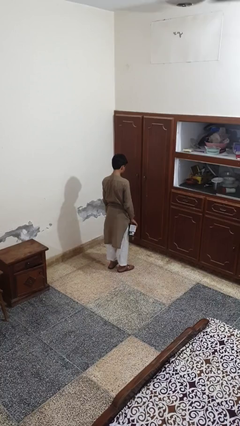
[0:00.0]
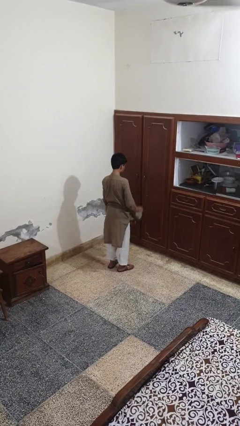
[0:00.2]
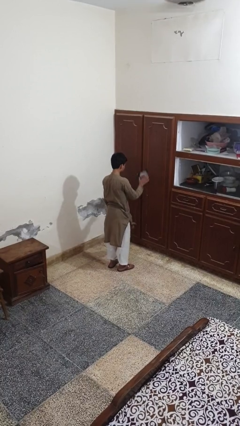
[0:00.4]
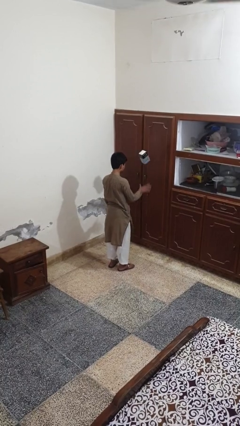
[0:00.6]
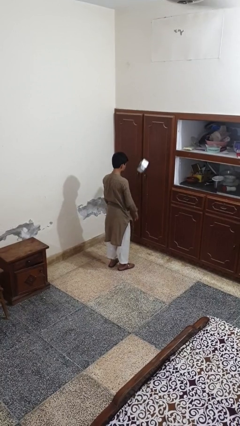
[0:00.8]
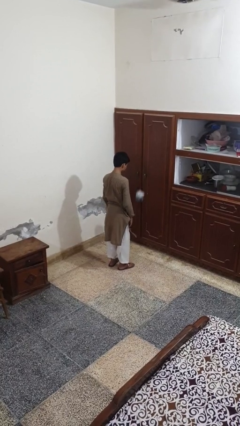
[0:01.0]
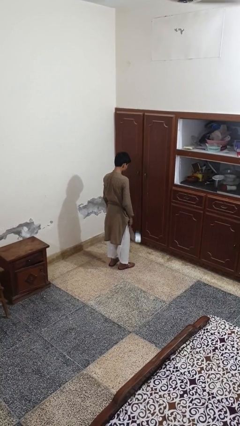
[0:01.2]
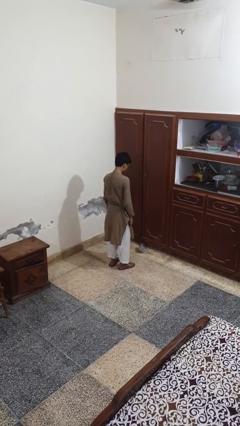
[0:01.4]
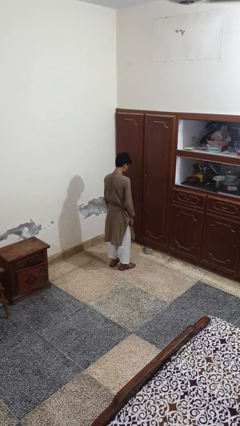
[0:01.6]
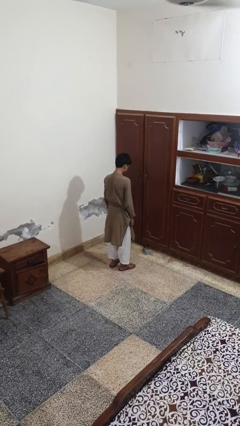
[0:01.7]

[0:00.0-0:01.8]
person throws object into air

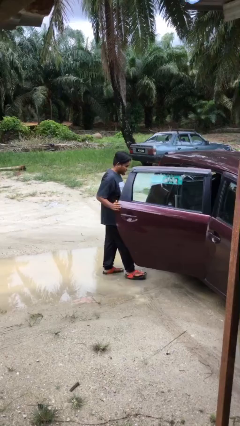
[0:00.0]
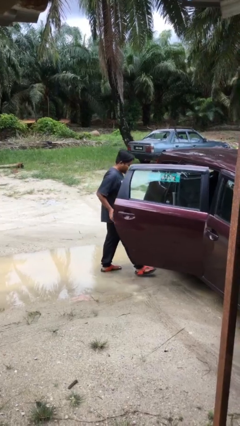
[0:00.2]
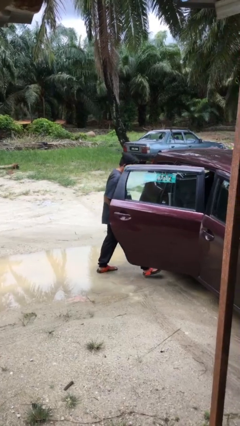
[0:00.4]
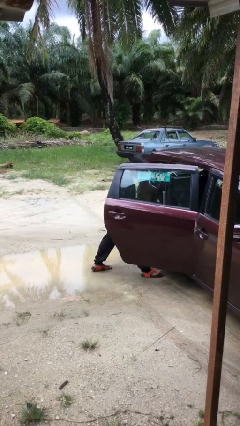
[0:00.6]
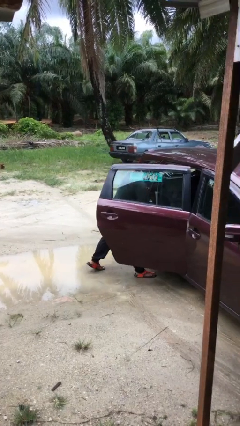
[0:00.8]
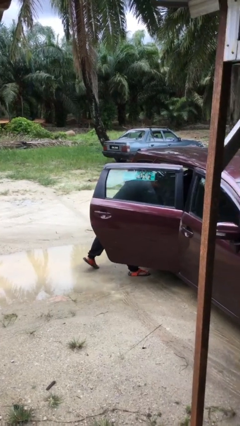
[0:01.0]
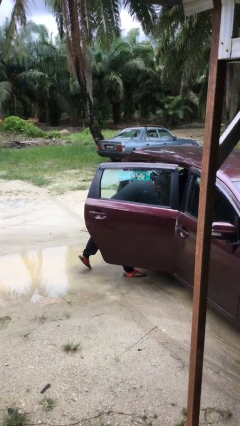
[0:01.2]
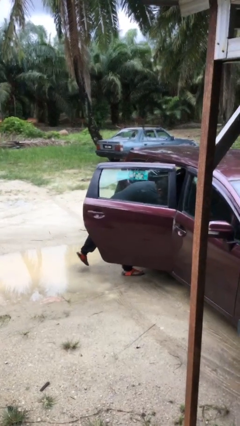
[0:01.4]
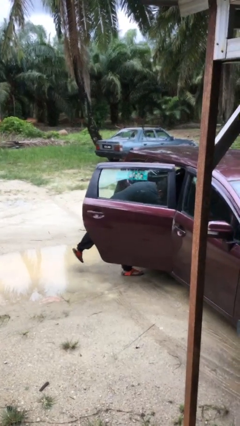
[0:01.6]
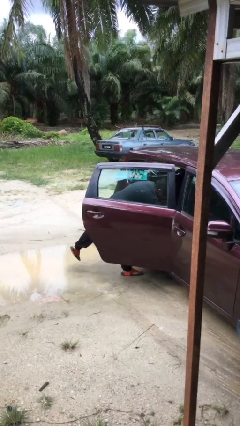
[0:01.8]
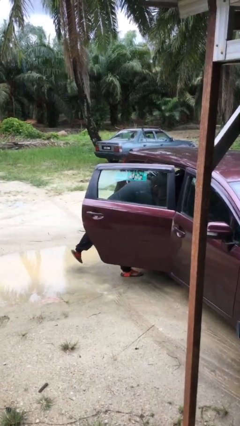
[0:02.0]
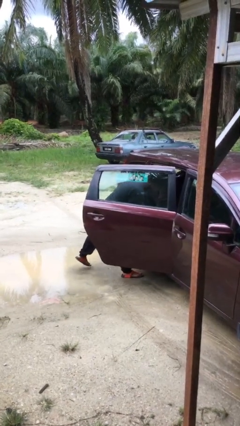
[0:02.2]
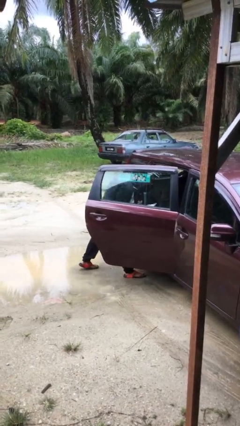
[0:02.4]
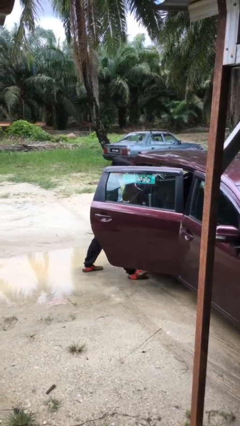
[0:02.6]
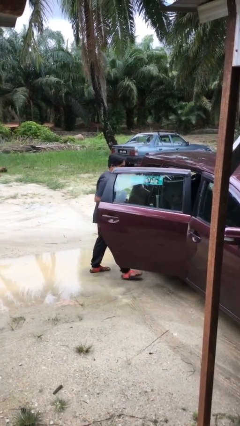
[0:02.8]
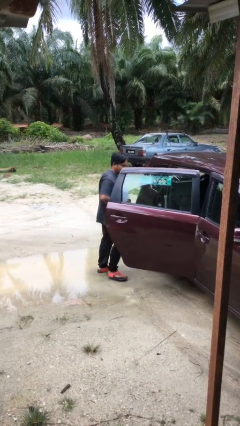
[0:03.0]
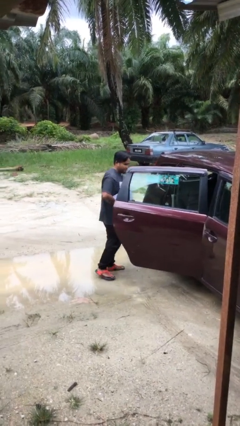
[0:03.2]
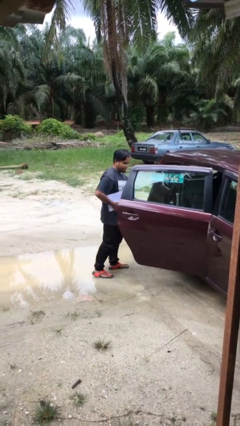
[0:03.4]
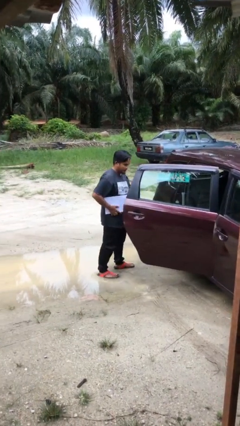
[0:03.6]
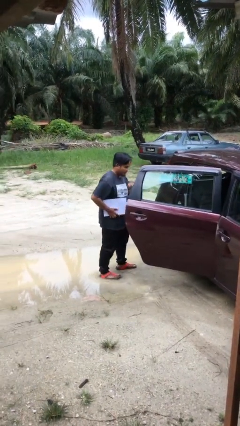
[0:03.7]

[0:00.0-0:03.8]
person unloads car

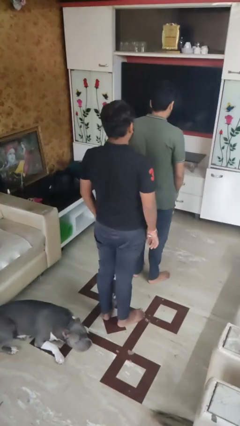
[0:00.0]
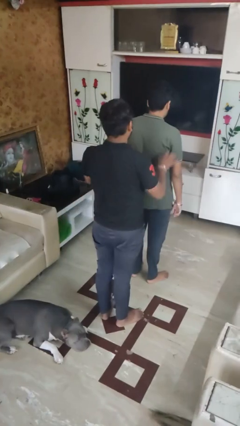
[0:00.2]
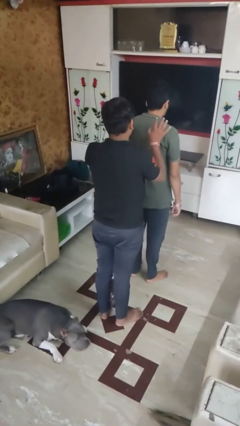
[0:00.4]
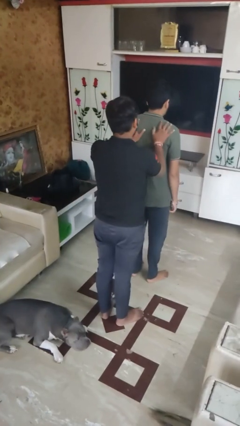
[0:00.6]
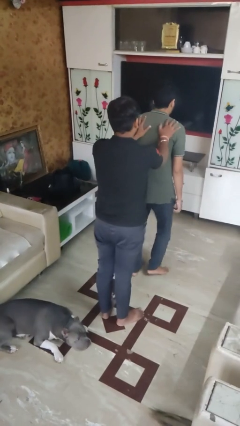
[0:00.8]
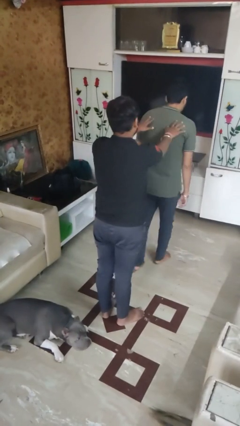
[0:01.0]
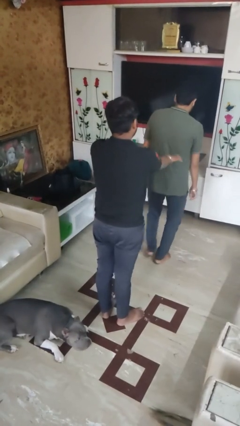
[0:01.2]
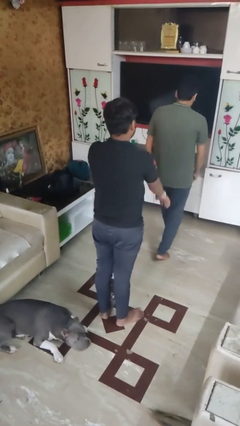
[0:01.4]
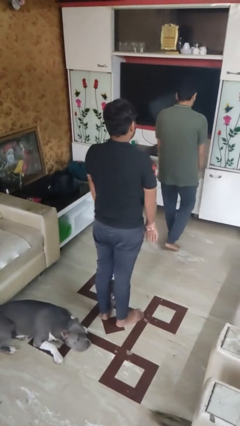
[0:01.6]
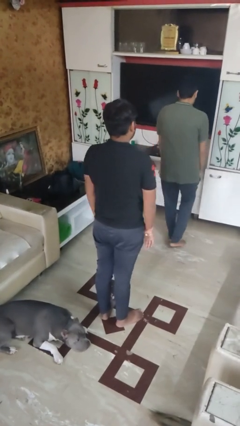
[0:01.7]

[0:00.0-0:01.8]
person shoves person

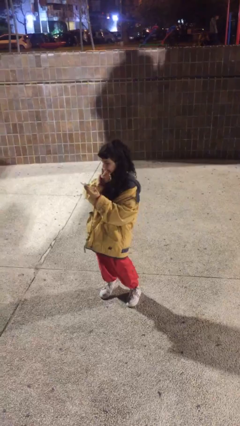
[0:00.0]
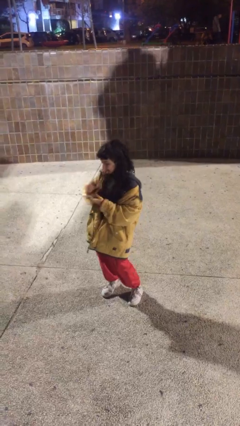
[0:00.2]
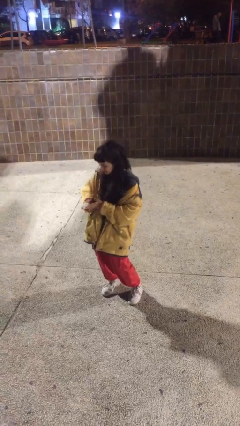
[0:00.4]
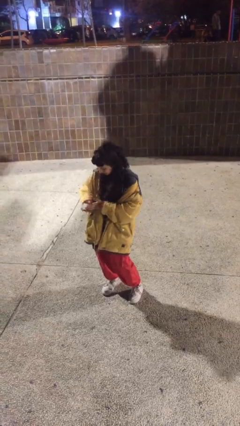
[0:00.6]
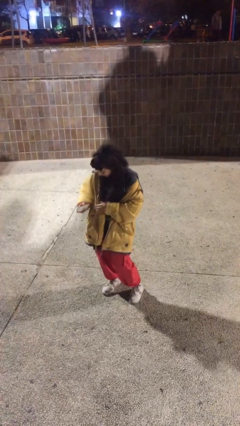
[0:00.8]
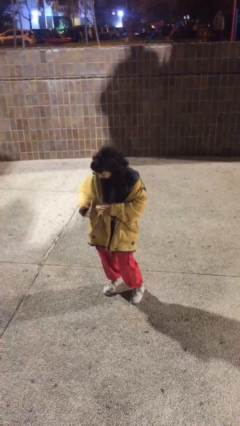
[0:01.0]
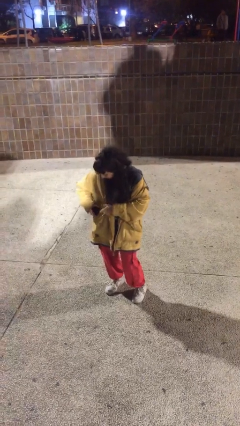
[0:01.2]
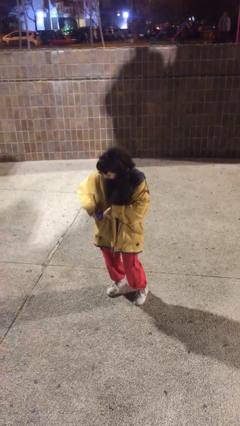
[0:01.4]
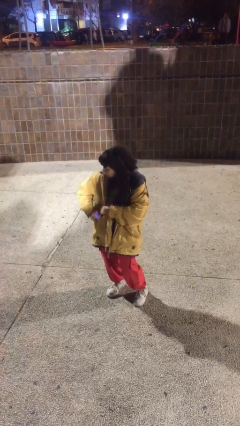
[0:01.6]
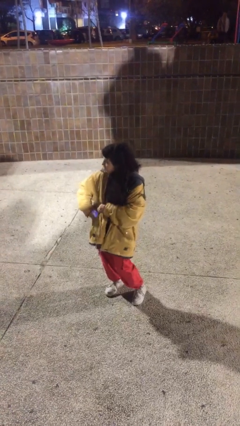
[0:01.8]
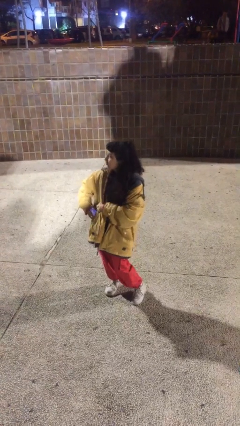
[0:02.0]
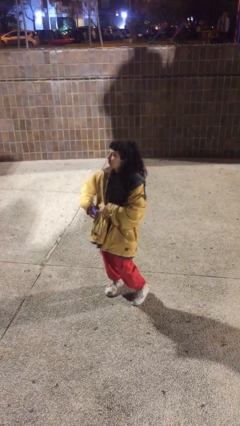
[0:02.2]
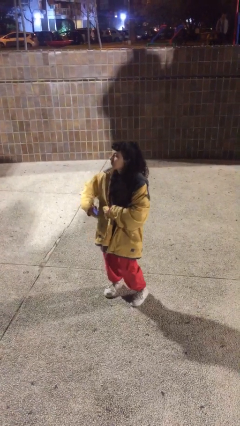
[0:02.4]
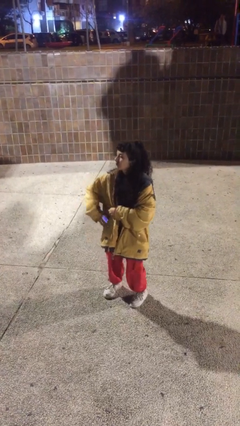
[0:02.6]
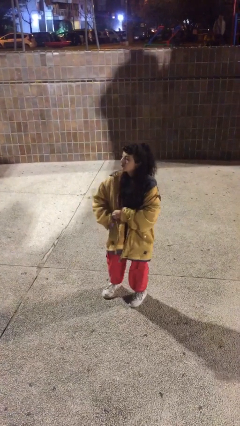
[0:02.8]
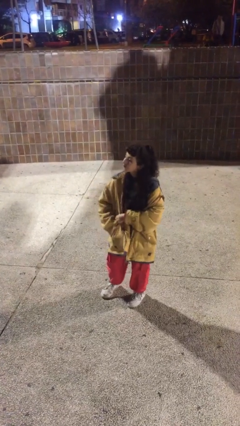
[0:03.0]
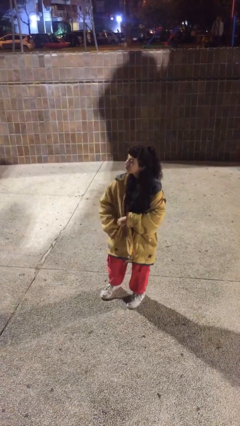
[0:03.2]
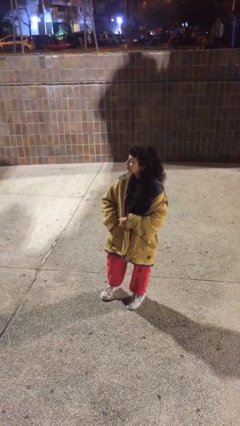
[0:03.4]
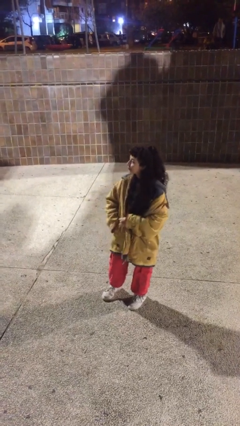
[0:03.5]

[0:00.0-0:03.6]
person puts phone into pocket

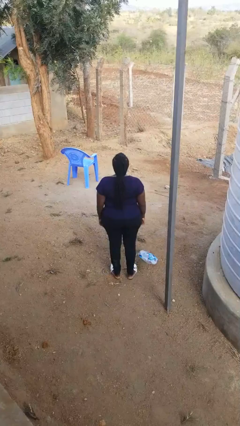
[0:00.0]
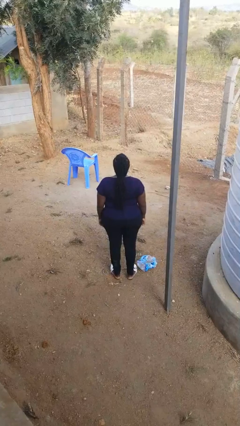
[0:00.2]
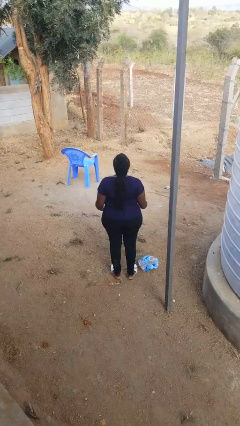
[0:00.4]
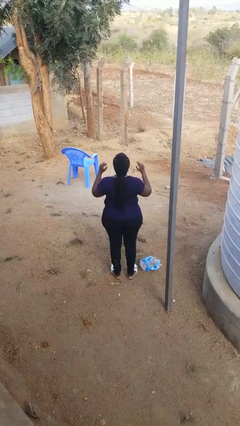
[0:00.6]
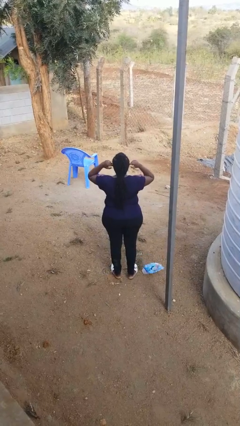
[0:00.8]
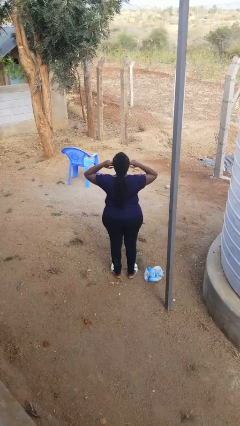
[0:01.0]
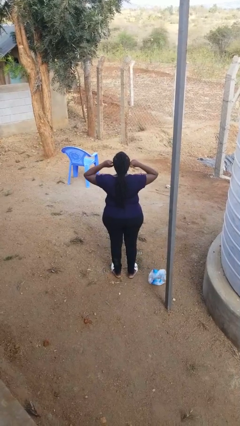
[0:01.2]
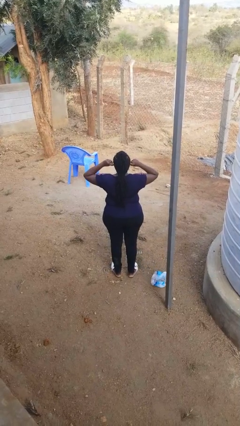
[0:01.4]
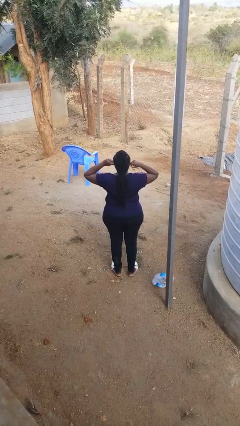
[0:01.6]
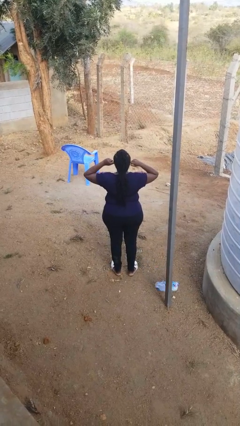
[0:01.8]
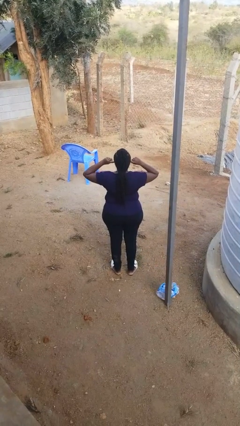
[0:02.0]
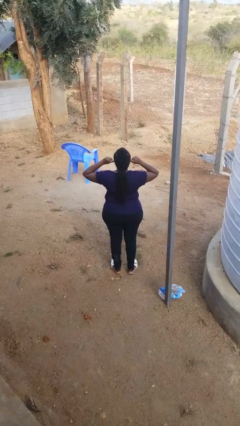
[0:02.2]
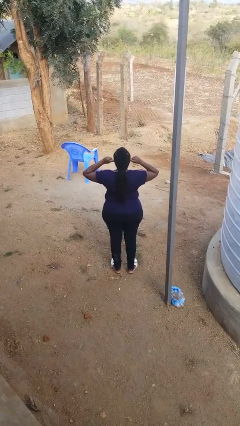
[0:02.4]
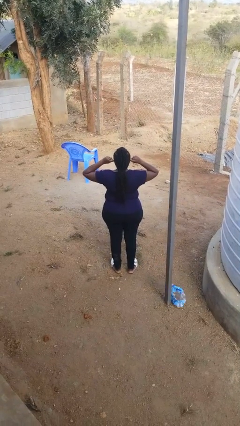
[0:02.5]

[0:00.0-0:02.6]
person puts fingers in ear

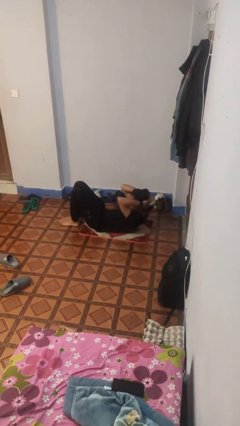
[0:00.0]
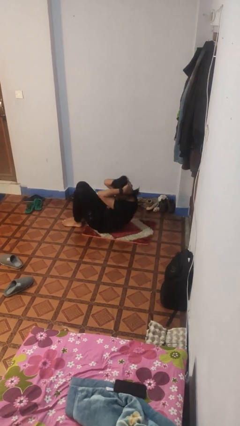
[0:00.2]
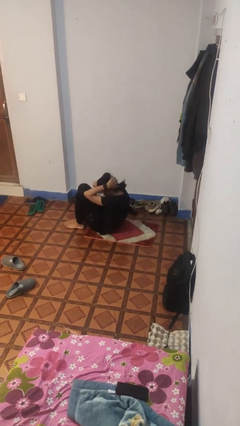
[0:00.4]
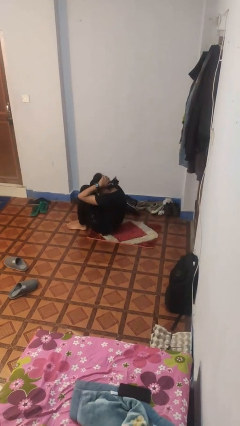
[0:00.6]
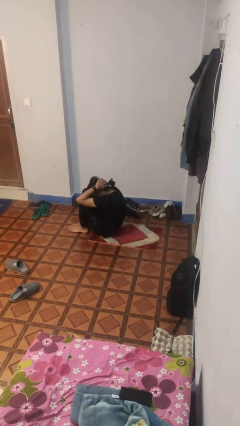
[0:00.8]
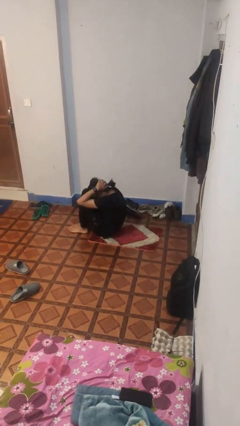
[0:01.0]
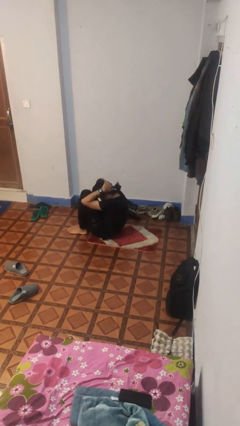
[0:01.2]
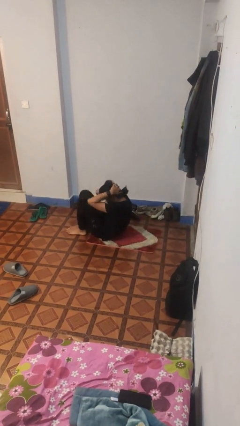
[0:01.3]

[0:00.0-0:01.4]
person exercises with situp

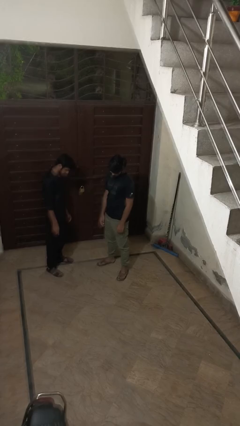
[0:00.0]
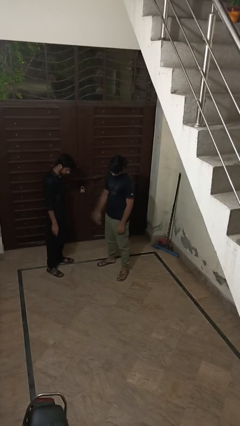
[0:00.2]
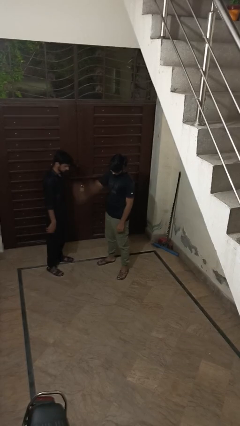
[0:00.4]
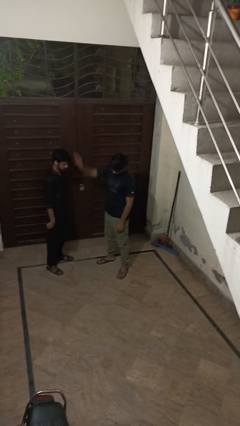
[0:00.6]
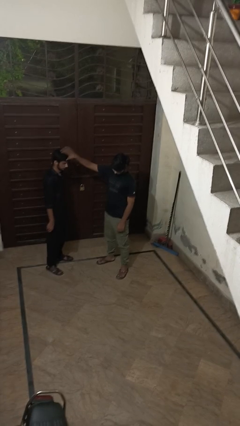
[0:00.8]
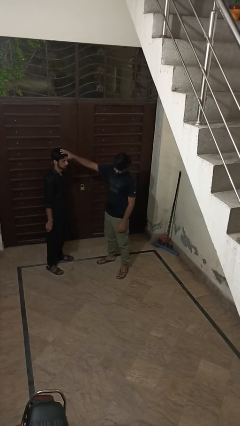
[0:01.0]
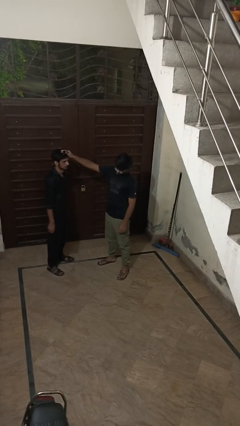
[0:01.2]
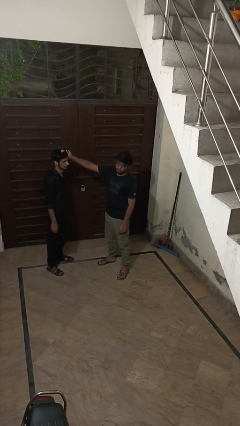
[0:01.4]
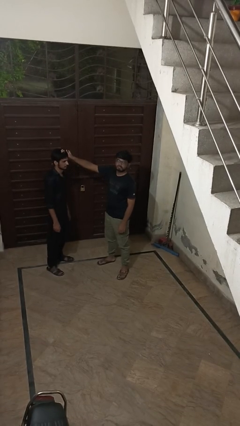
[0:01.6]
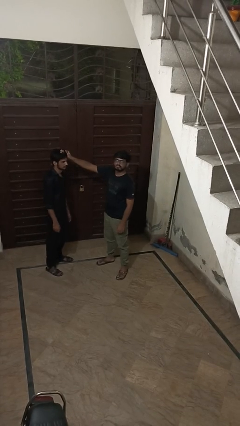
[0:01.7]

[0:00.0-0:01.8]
person grabs person by hair
